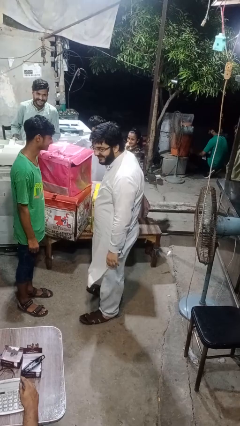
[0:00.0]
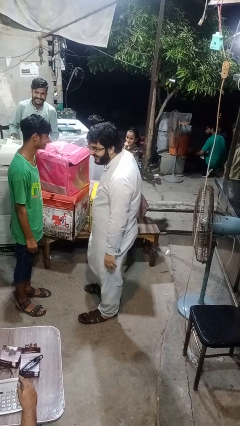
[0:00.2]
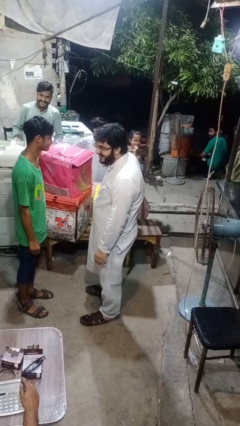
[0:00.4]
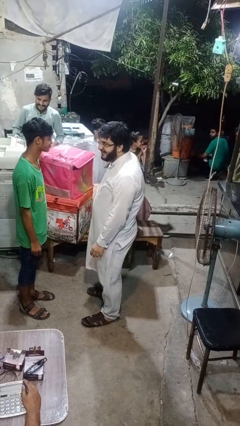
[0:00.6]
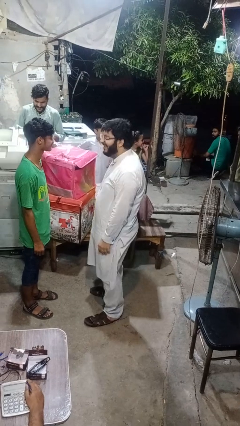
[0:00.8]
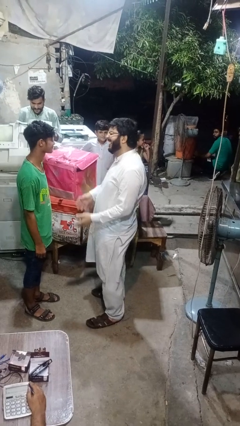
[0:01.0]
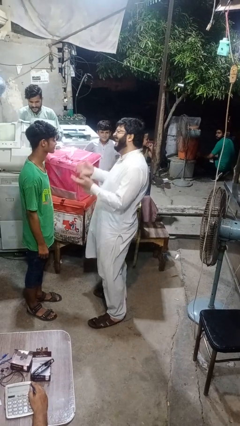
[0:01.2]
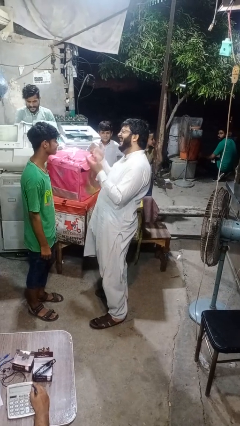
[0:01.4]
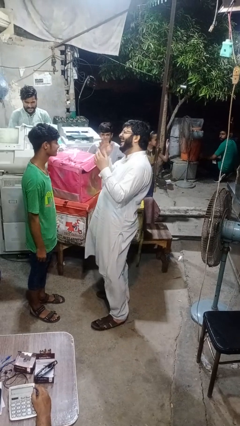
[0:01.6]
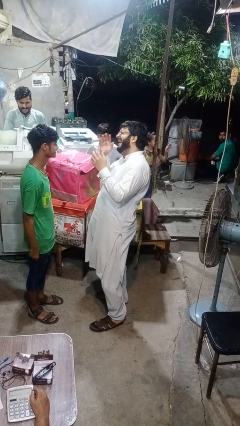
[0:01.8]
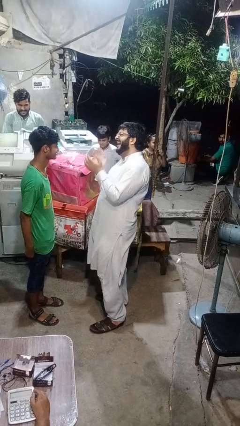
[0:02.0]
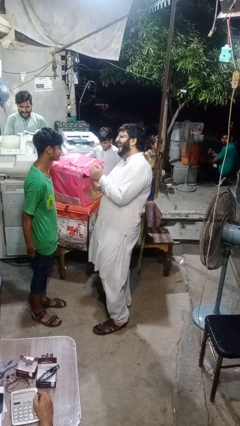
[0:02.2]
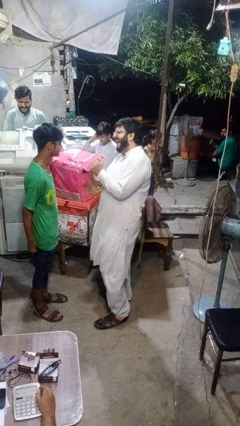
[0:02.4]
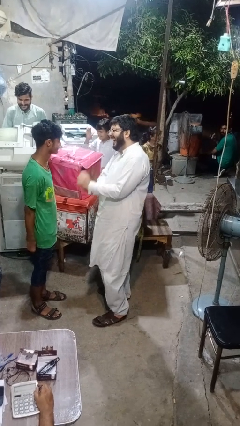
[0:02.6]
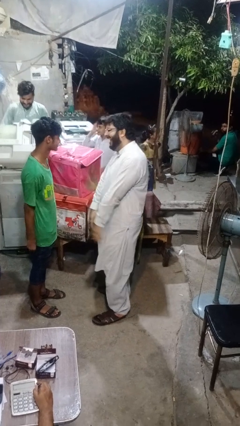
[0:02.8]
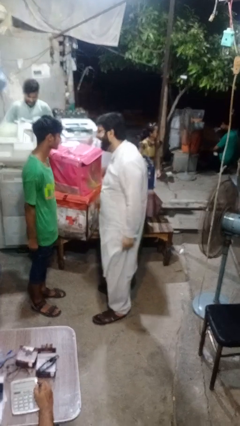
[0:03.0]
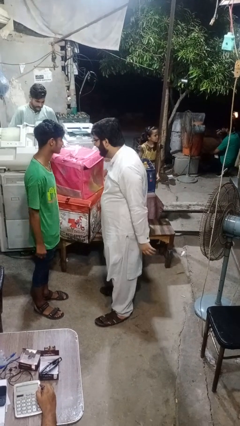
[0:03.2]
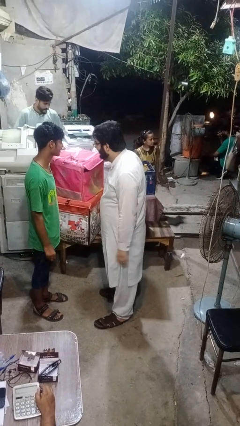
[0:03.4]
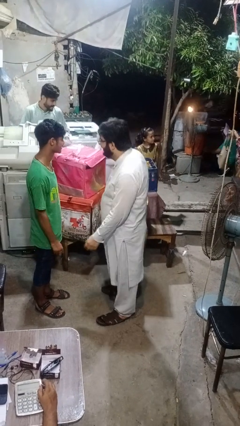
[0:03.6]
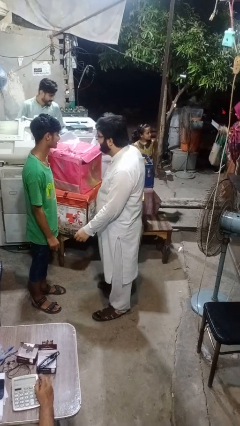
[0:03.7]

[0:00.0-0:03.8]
person laughs with person

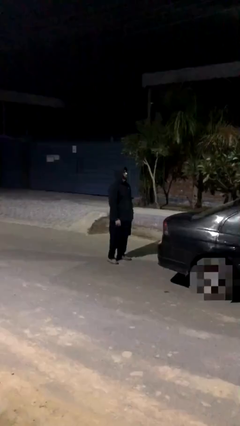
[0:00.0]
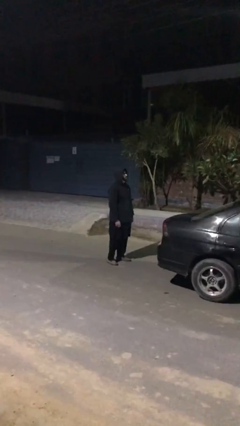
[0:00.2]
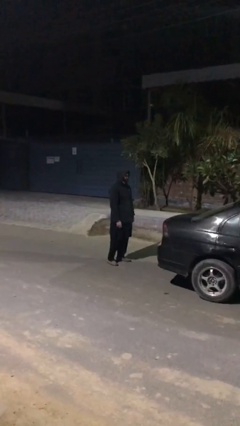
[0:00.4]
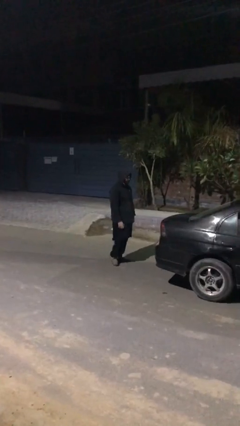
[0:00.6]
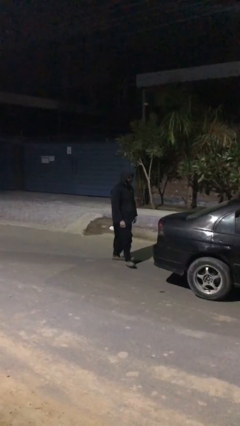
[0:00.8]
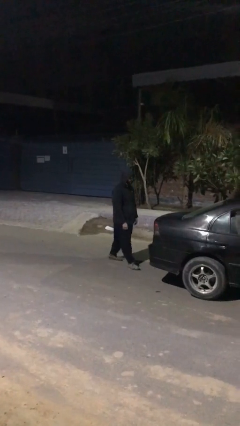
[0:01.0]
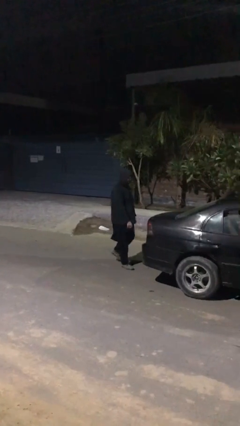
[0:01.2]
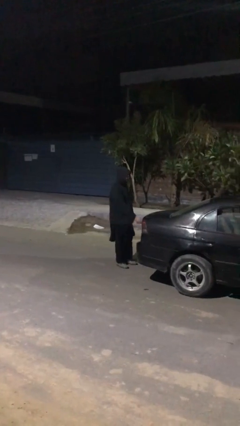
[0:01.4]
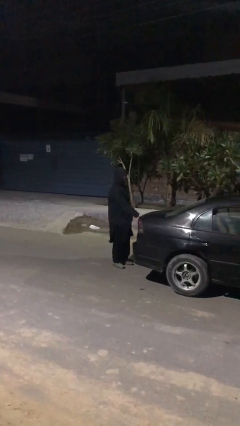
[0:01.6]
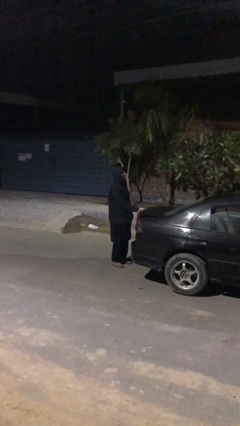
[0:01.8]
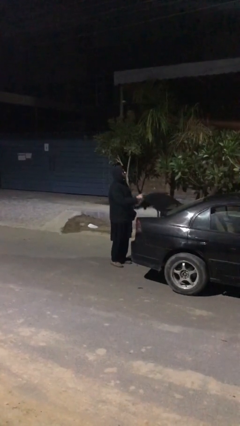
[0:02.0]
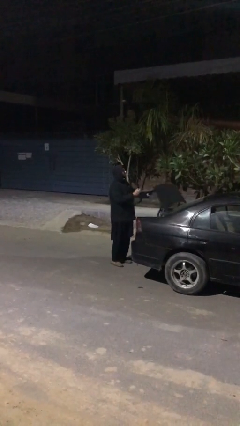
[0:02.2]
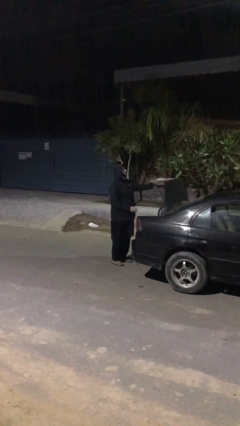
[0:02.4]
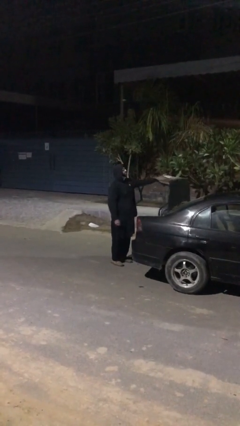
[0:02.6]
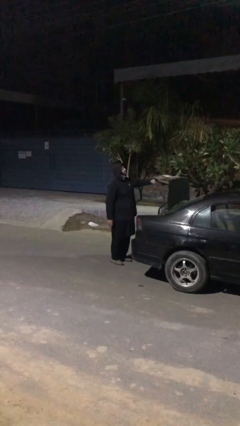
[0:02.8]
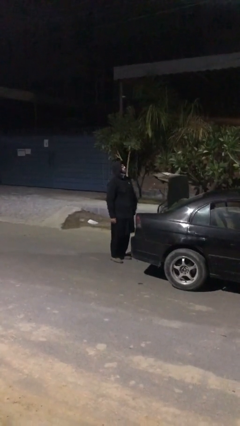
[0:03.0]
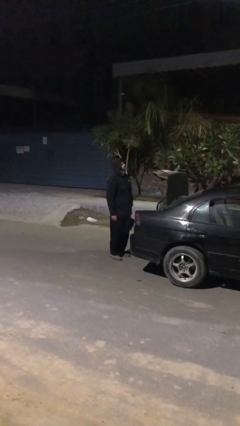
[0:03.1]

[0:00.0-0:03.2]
person opens car trunk

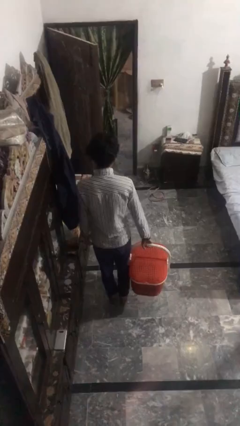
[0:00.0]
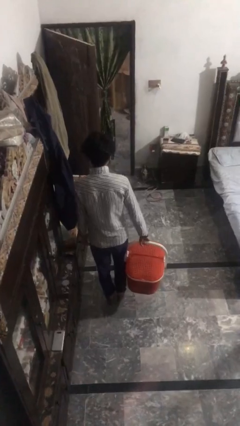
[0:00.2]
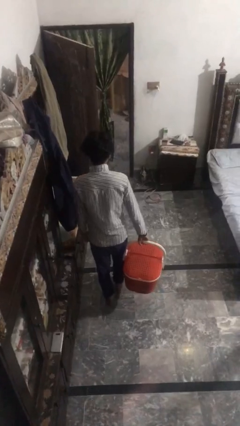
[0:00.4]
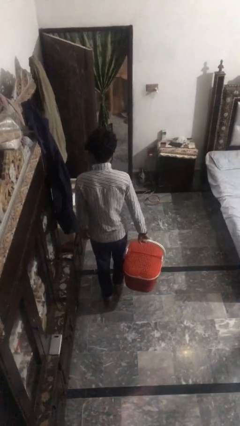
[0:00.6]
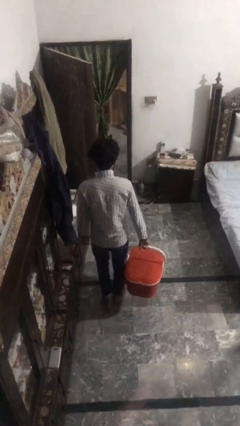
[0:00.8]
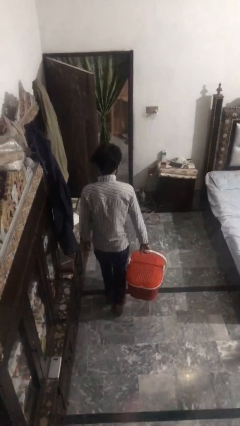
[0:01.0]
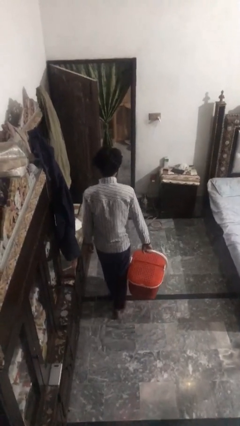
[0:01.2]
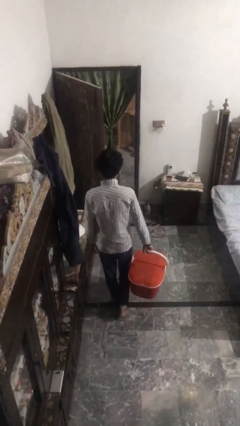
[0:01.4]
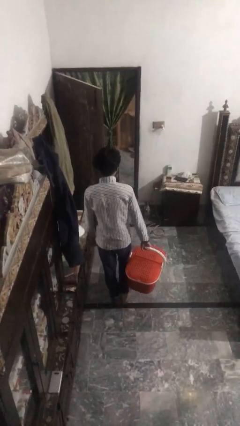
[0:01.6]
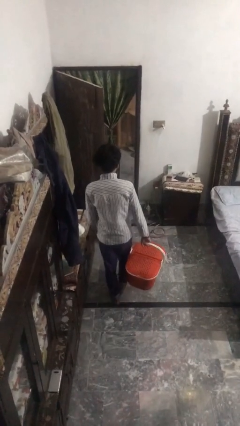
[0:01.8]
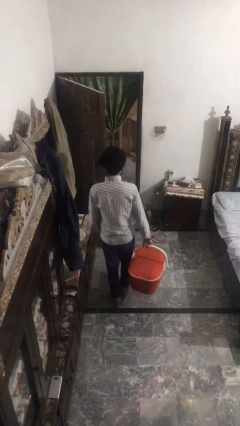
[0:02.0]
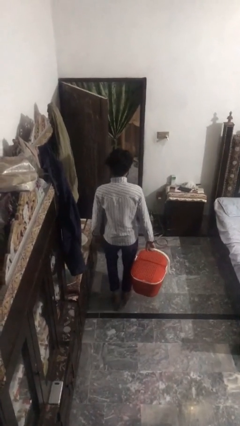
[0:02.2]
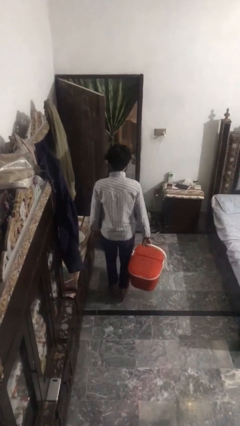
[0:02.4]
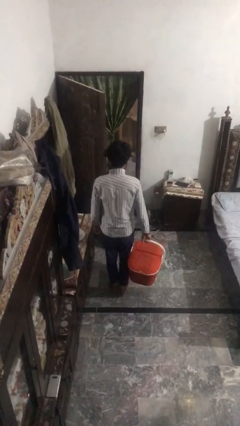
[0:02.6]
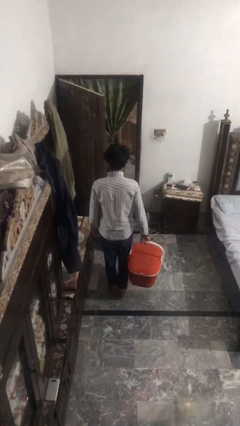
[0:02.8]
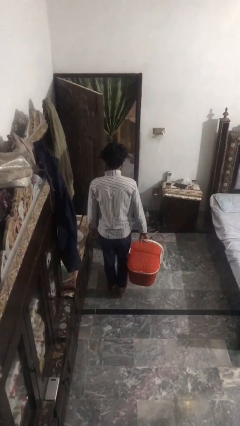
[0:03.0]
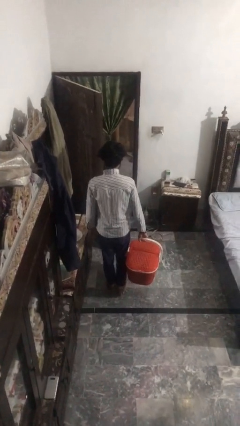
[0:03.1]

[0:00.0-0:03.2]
person carries laundry basket

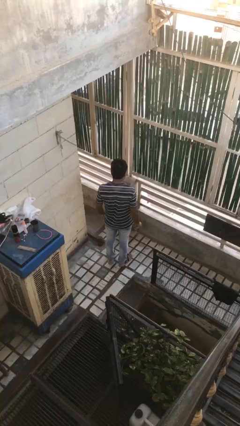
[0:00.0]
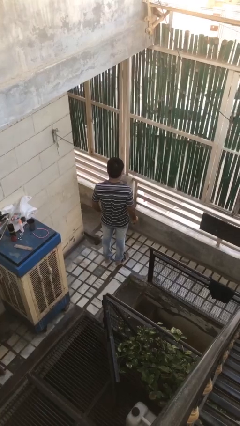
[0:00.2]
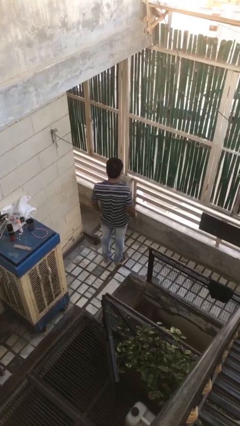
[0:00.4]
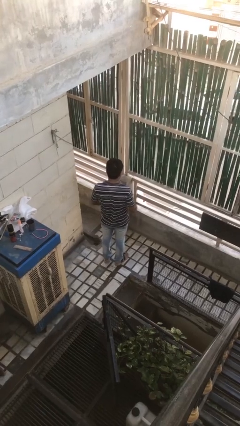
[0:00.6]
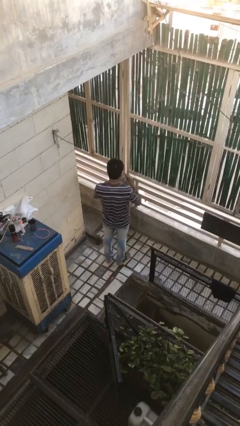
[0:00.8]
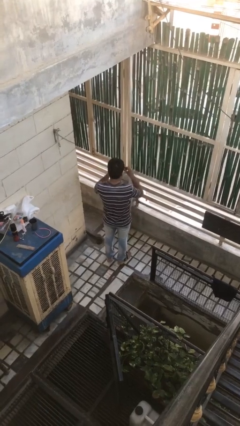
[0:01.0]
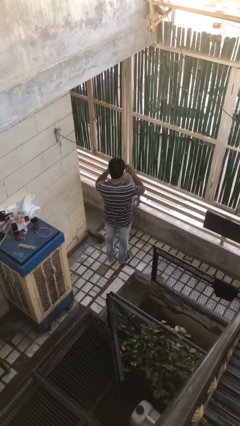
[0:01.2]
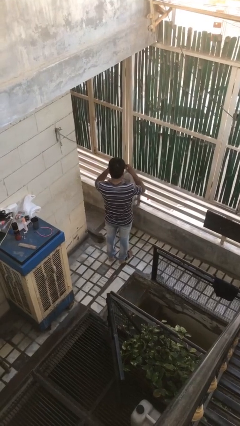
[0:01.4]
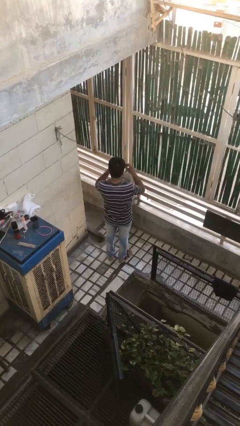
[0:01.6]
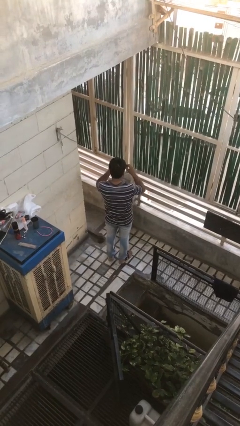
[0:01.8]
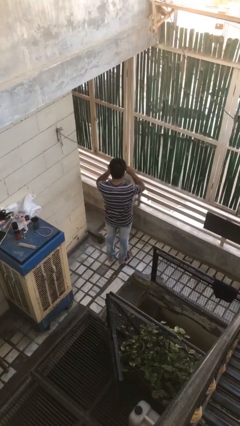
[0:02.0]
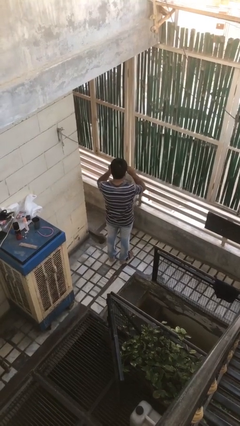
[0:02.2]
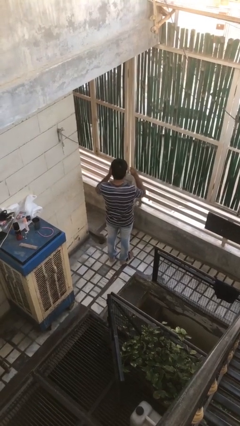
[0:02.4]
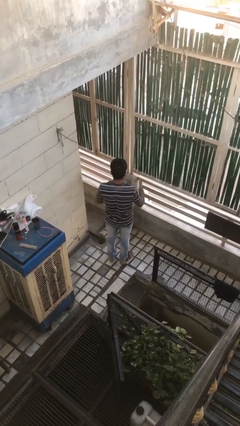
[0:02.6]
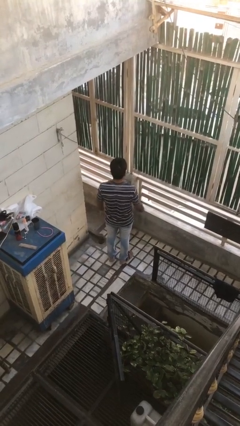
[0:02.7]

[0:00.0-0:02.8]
person puts on sunglasses

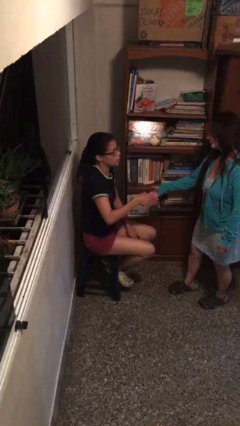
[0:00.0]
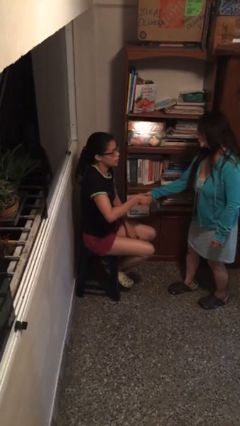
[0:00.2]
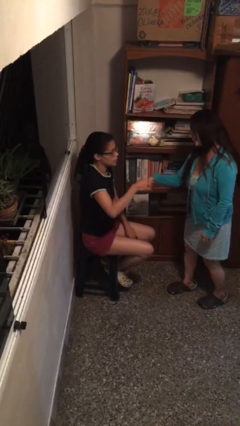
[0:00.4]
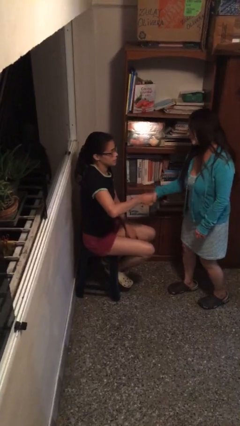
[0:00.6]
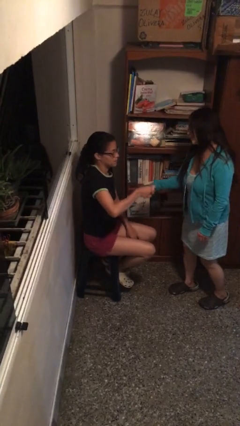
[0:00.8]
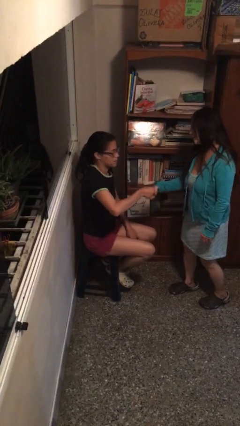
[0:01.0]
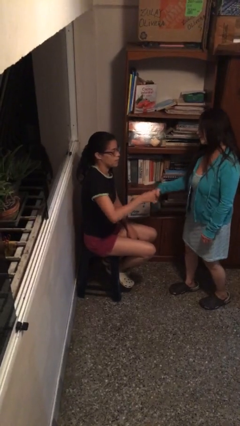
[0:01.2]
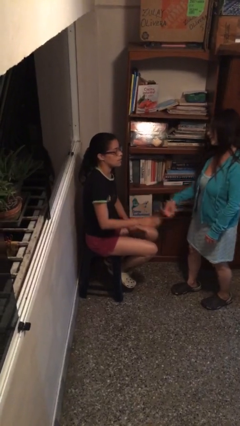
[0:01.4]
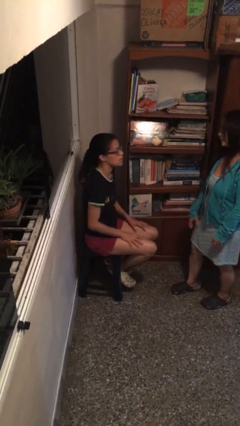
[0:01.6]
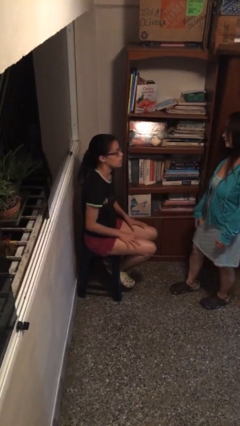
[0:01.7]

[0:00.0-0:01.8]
person shakes hand

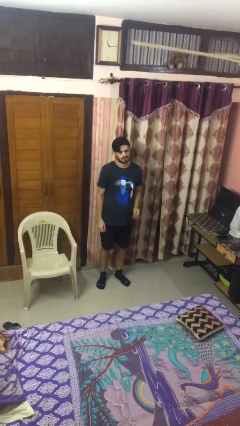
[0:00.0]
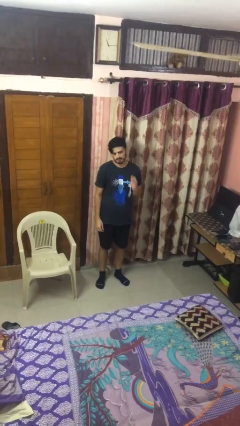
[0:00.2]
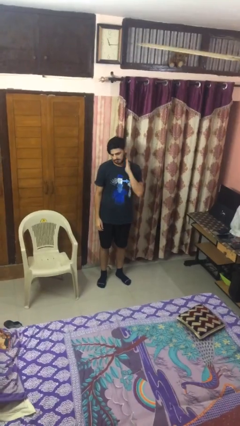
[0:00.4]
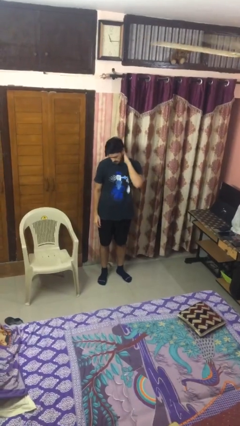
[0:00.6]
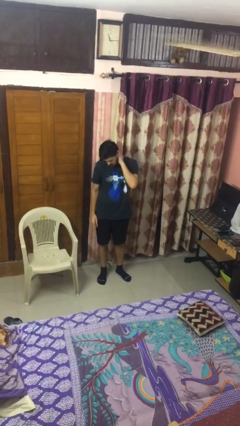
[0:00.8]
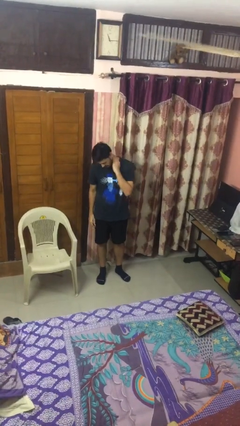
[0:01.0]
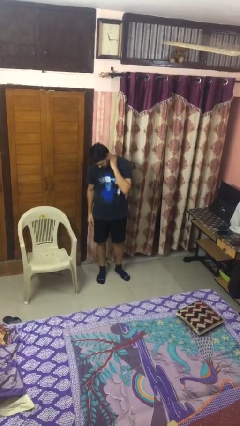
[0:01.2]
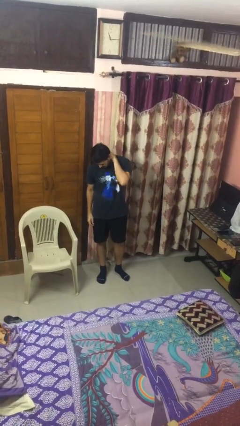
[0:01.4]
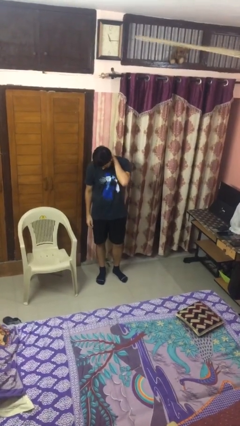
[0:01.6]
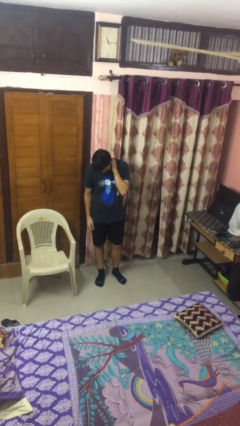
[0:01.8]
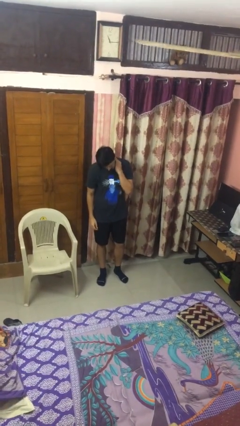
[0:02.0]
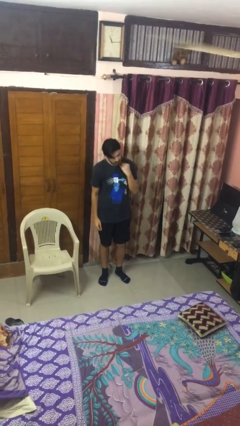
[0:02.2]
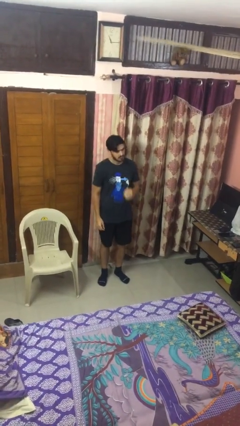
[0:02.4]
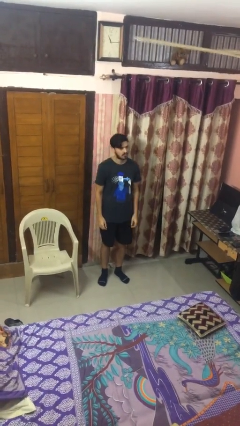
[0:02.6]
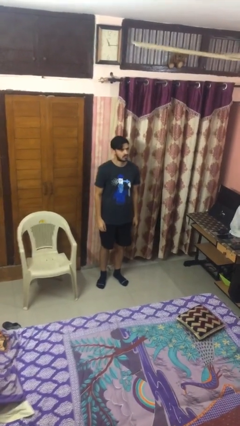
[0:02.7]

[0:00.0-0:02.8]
person rubs neck
